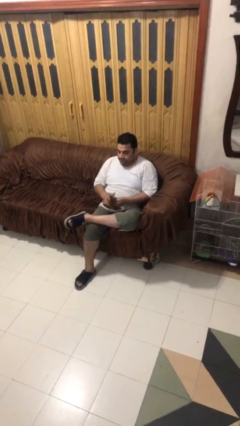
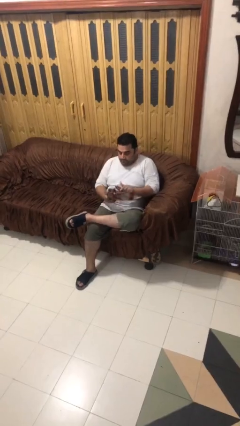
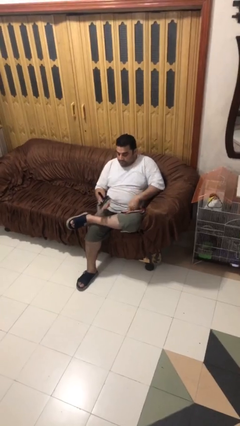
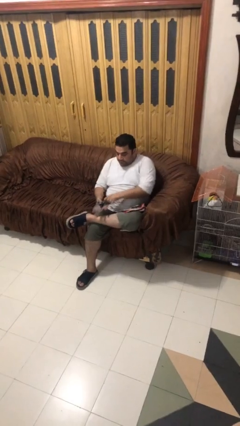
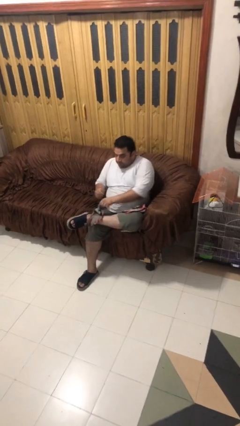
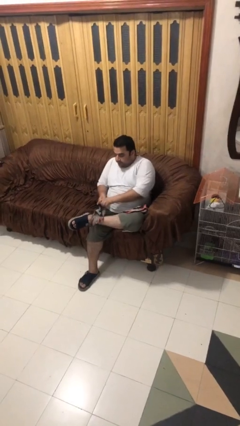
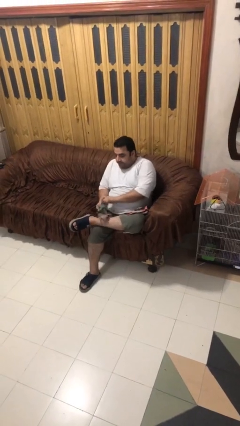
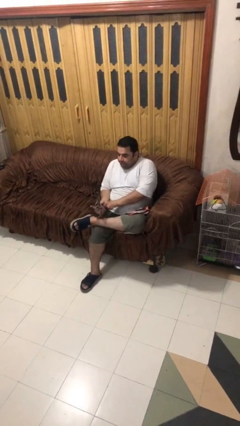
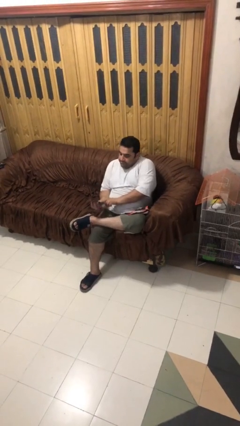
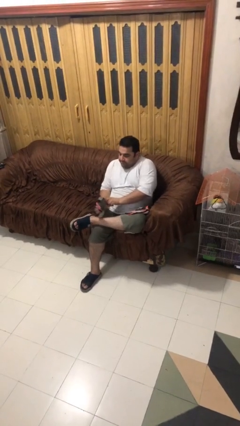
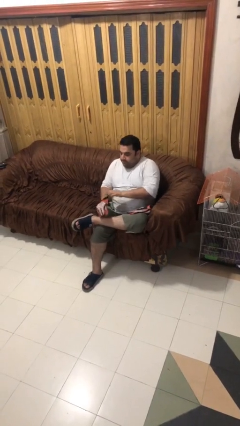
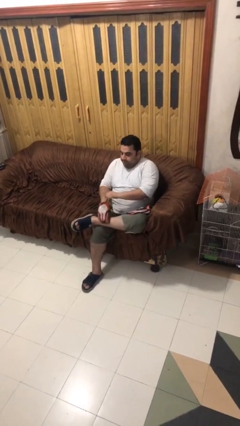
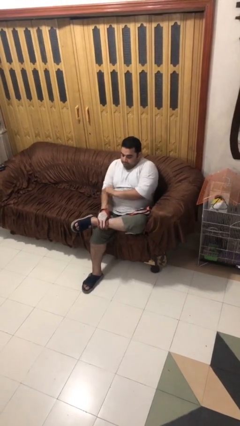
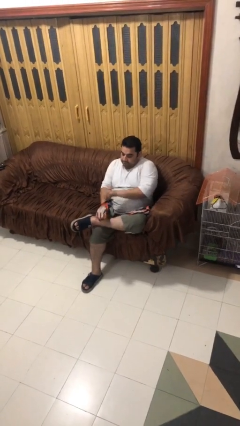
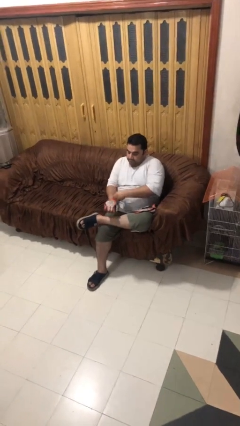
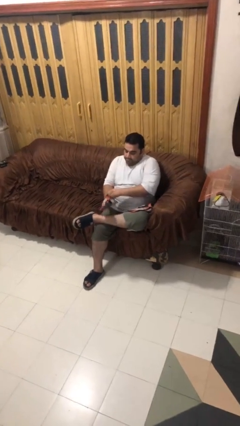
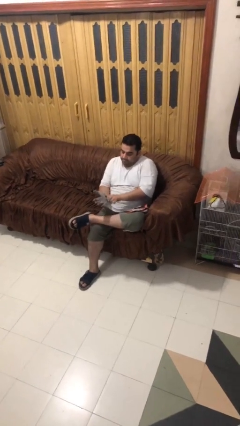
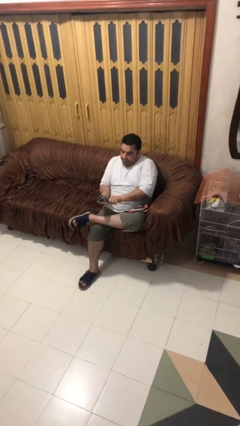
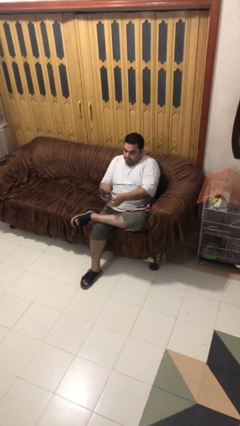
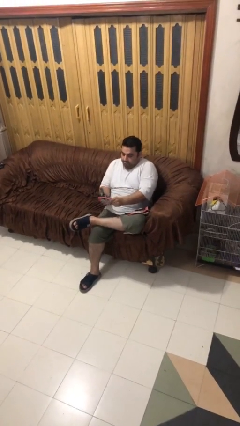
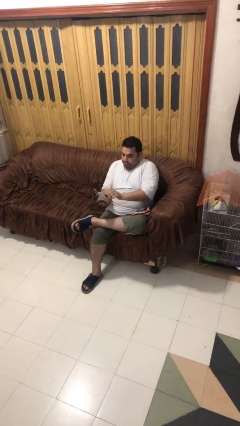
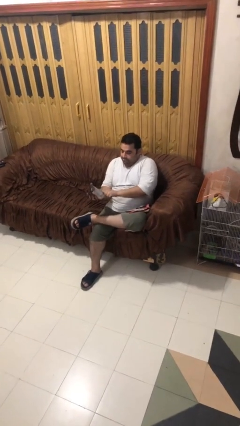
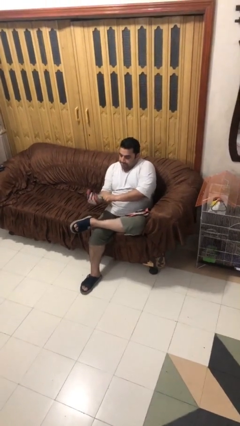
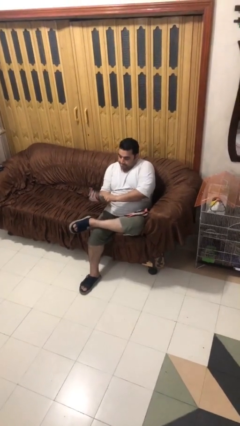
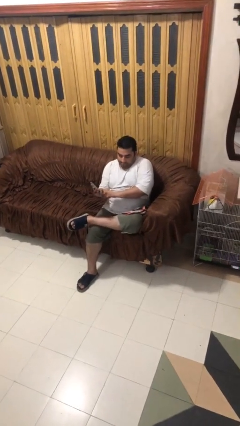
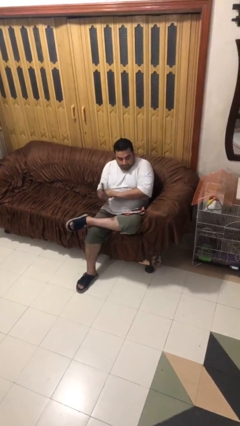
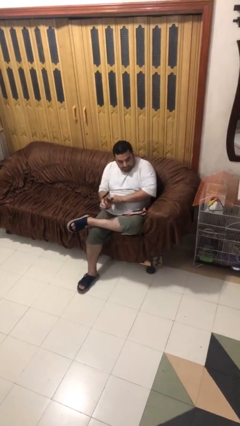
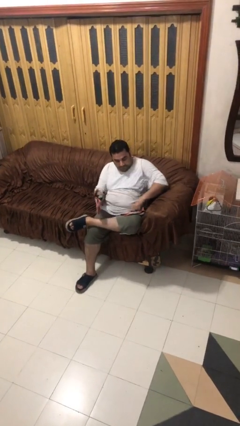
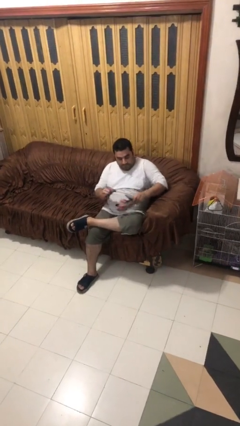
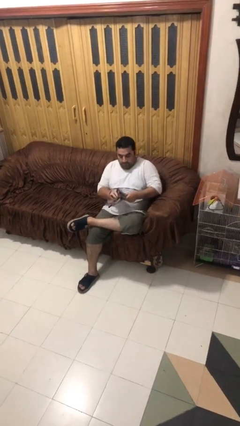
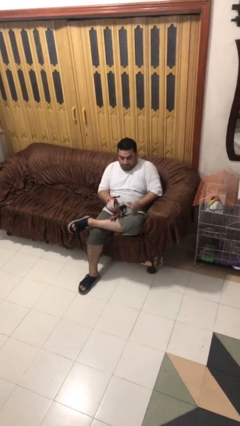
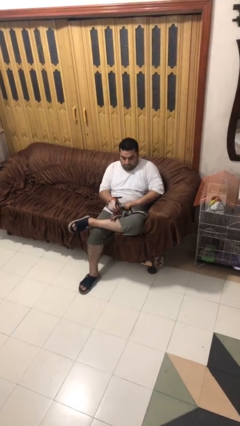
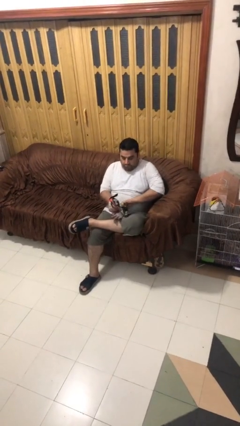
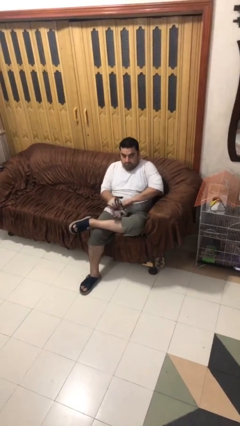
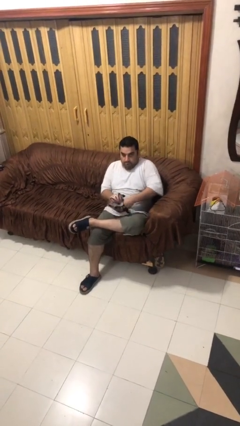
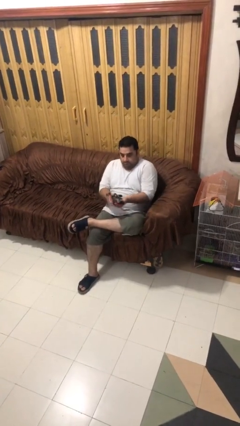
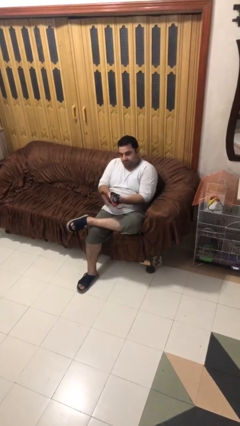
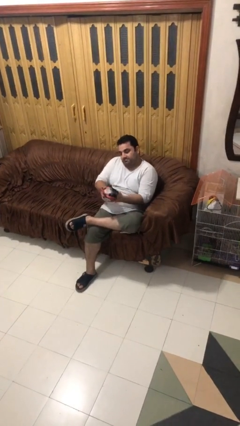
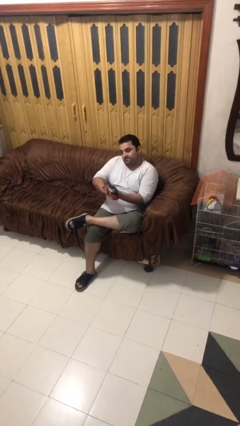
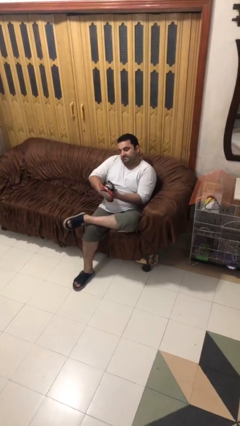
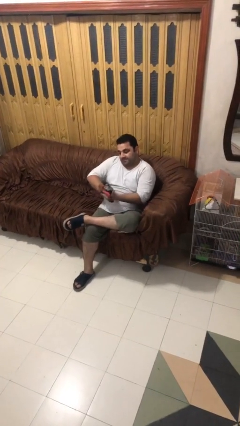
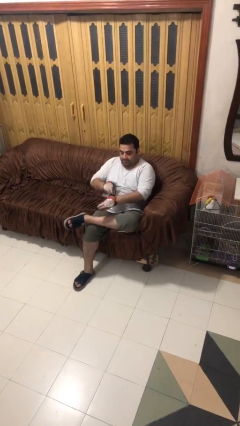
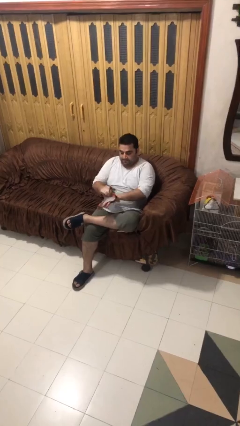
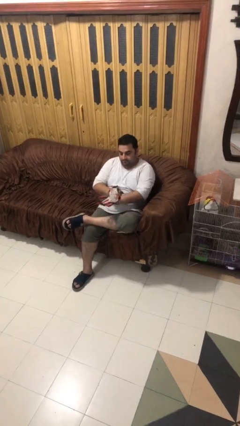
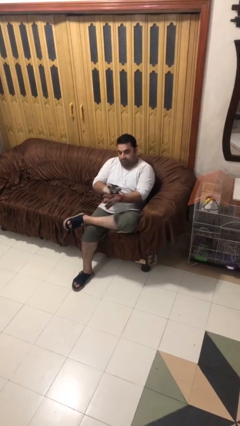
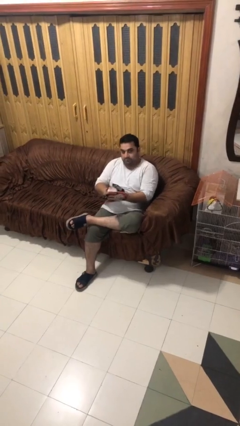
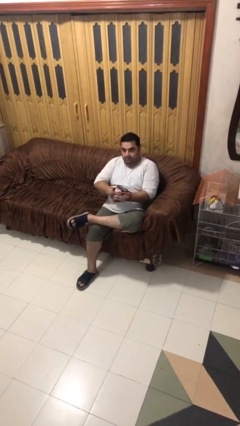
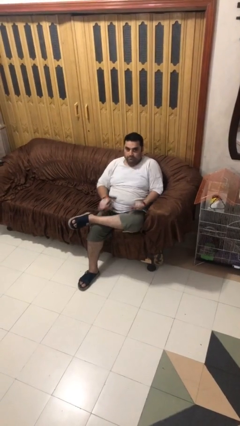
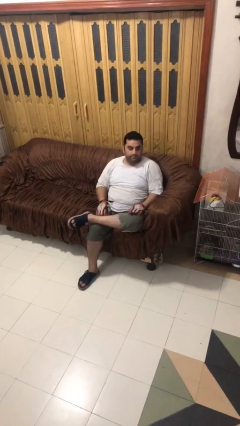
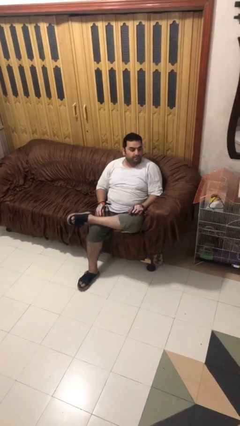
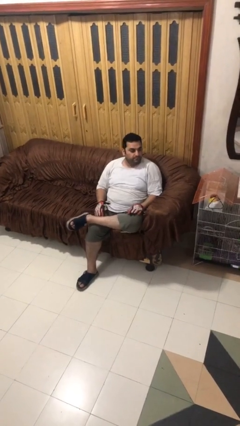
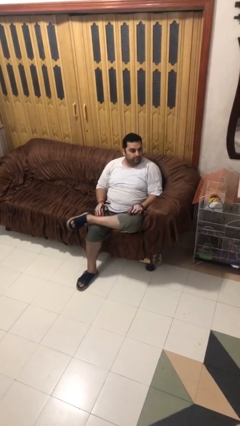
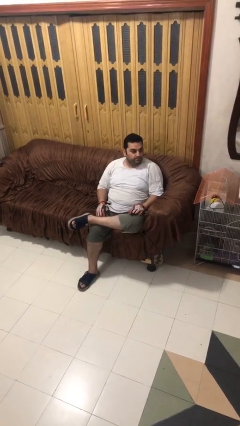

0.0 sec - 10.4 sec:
person puts on gloves

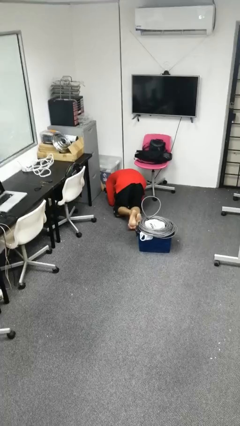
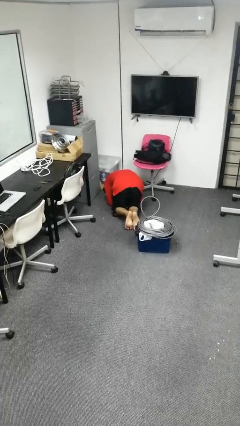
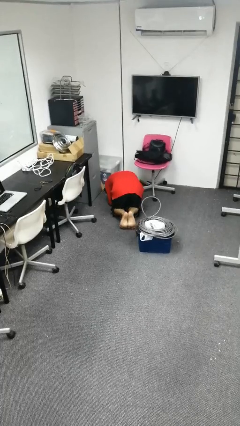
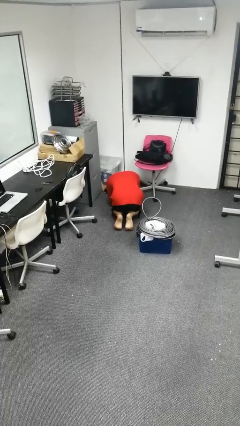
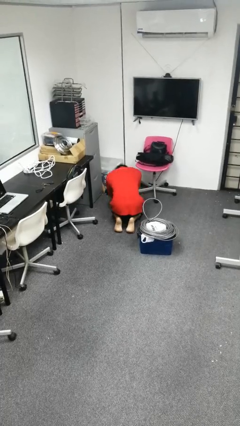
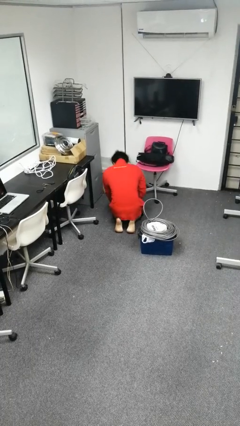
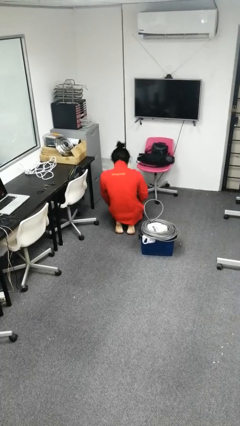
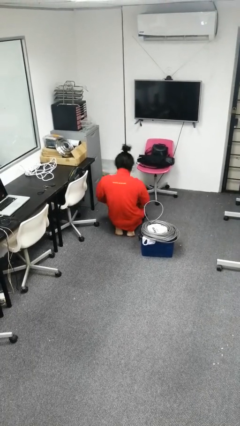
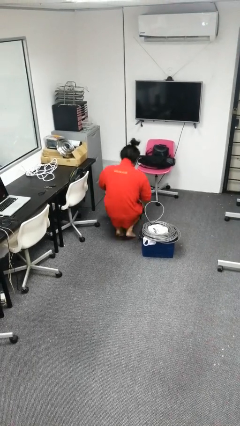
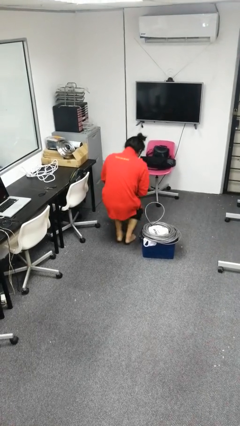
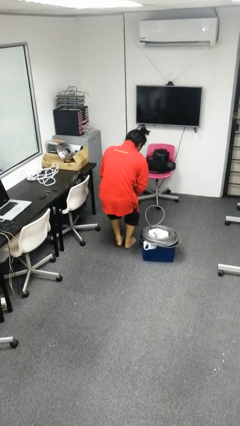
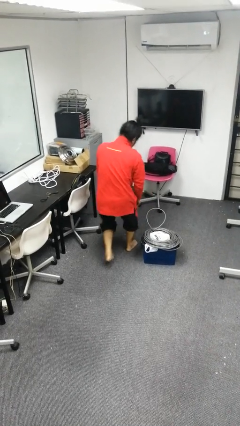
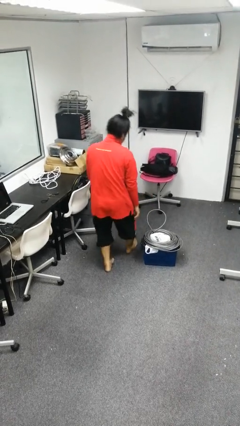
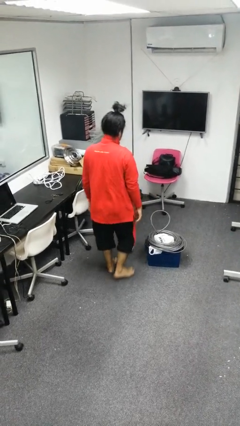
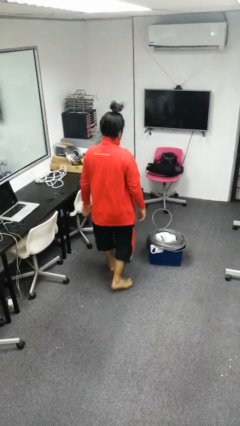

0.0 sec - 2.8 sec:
person stands up from floor

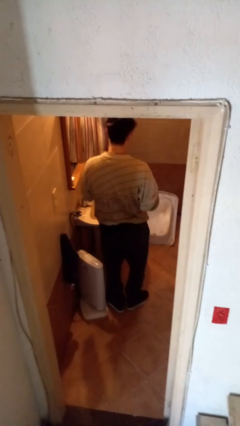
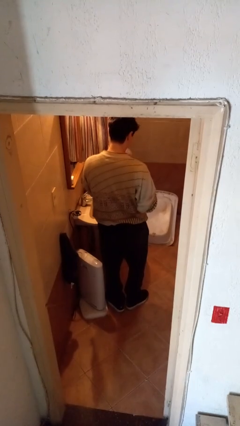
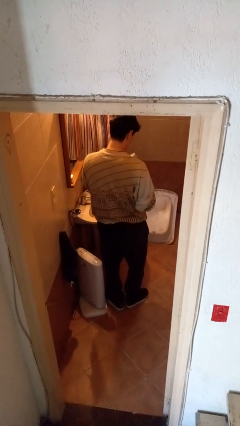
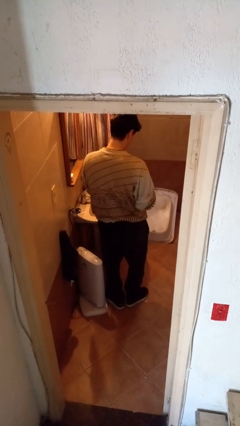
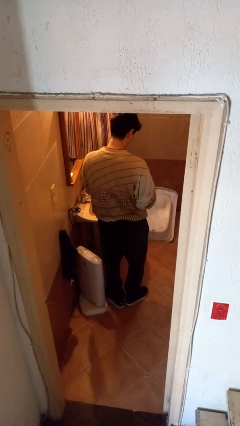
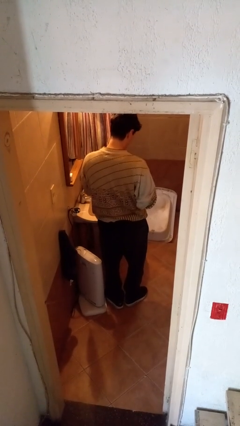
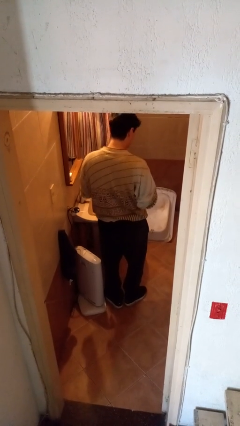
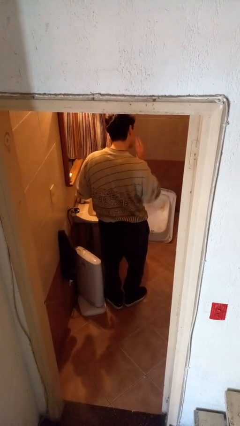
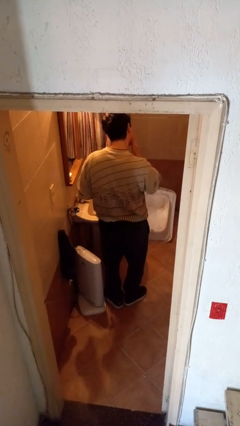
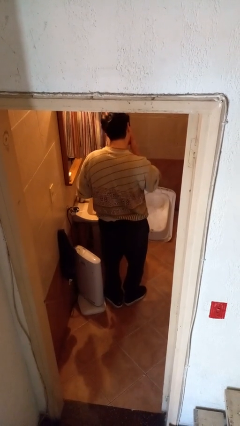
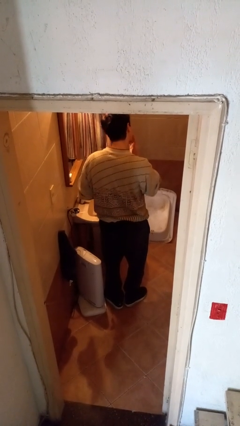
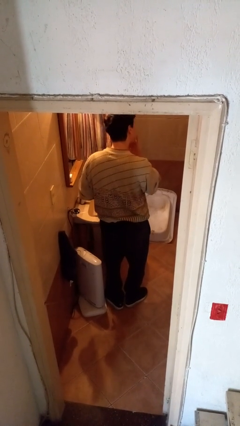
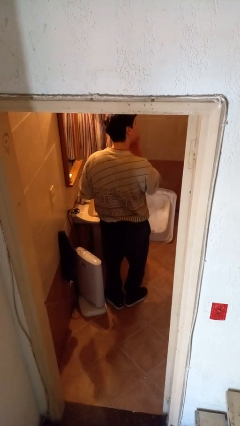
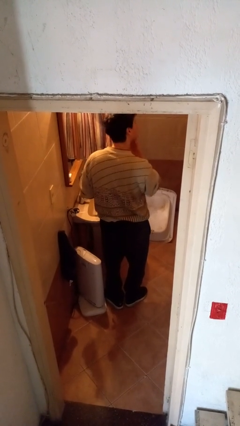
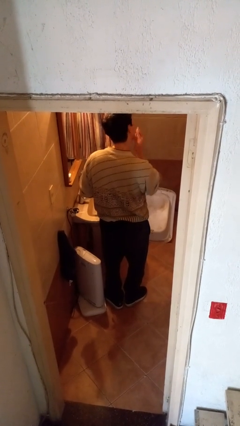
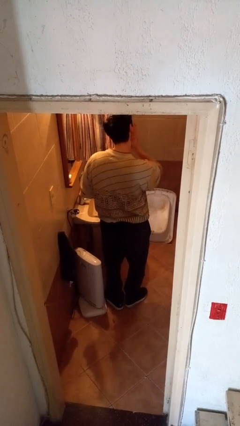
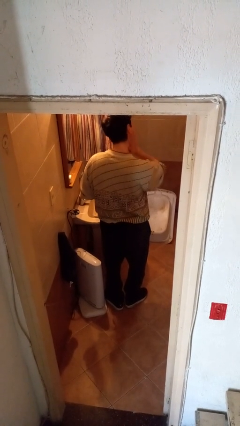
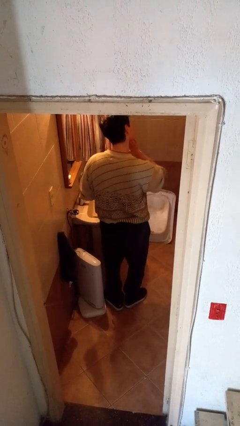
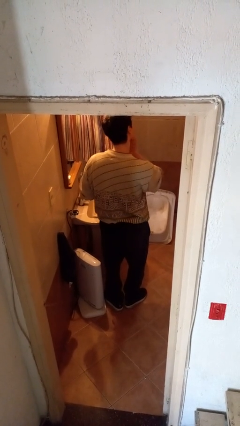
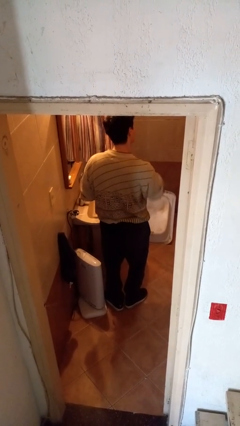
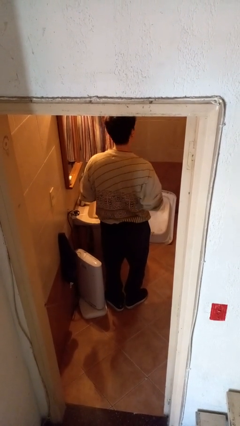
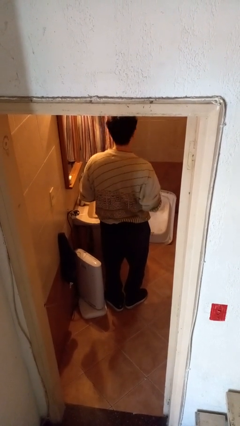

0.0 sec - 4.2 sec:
person applies facial moisturizer

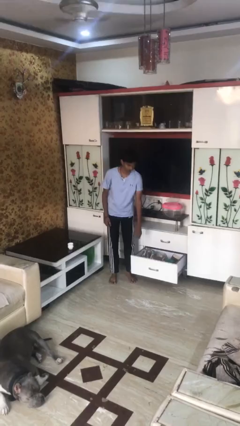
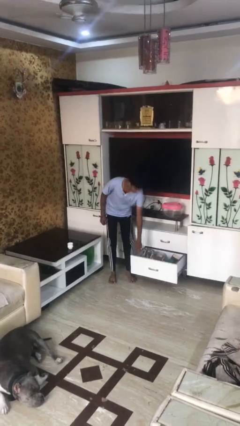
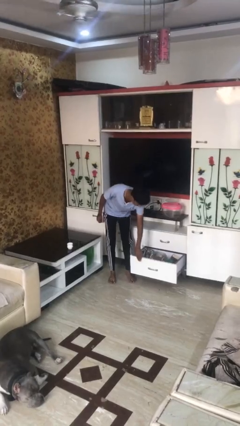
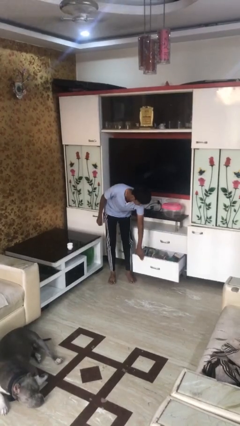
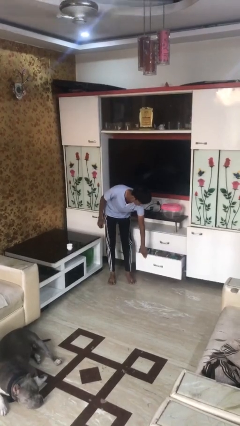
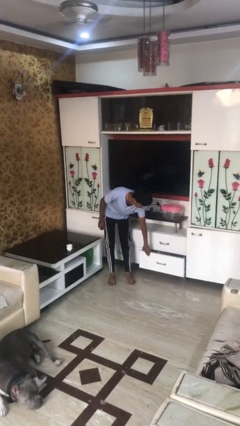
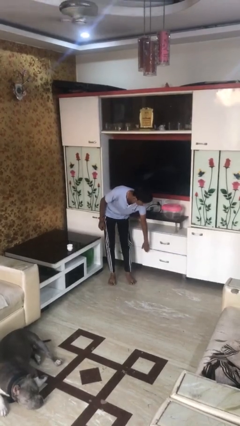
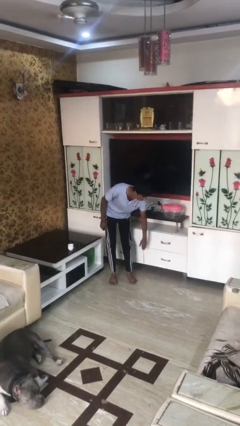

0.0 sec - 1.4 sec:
person closes dresser drawer
